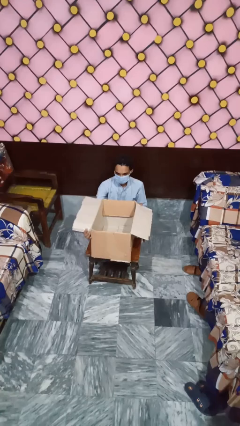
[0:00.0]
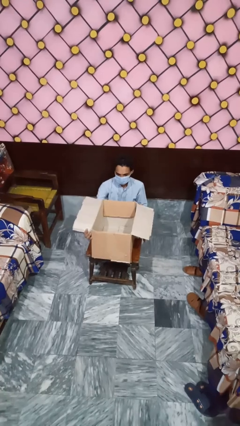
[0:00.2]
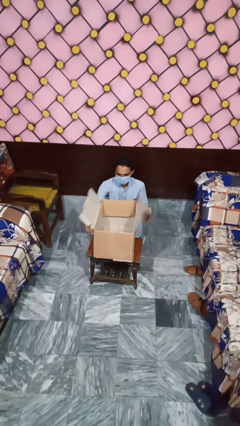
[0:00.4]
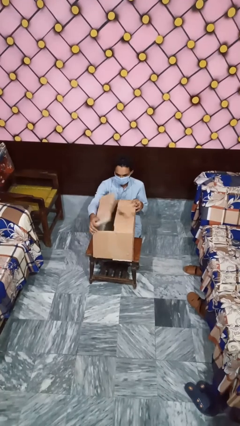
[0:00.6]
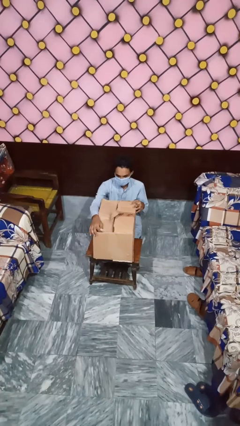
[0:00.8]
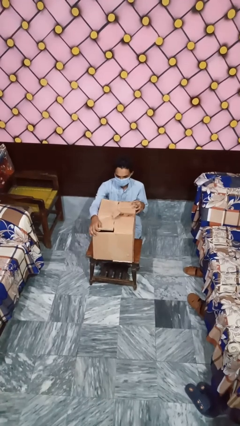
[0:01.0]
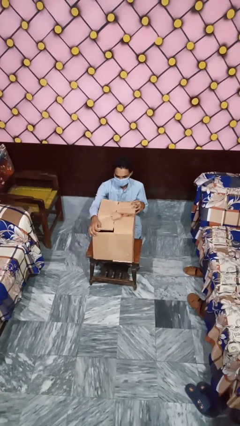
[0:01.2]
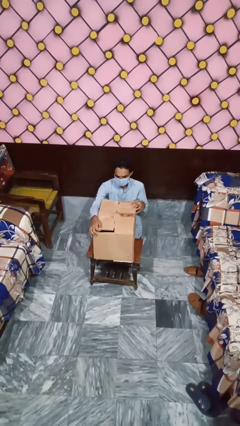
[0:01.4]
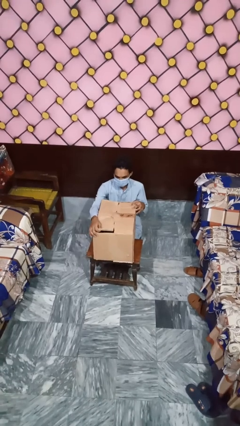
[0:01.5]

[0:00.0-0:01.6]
person closes box

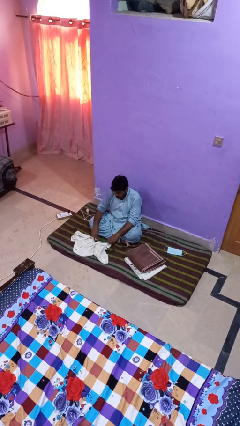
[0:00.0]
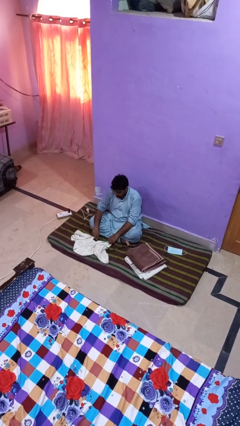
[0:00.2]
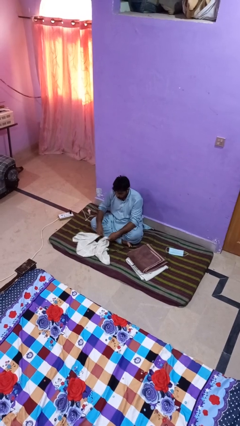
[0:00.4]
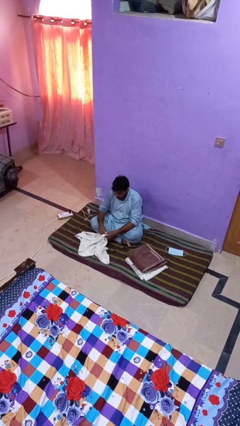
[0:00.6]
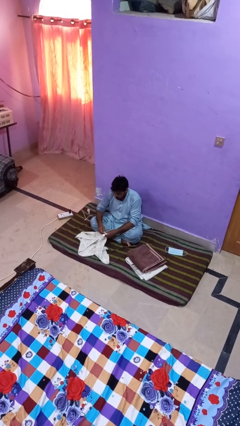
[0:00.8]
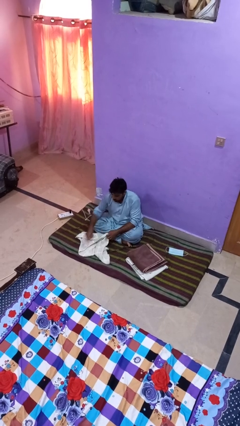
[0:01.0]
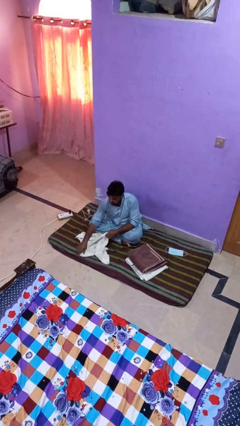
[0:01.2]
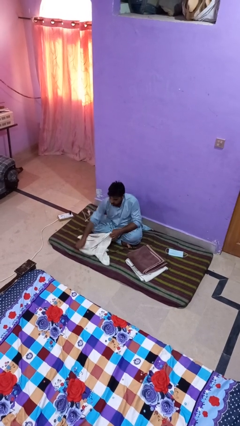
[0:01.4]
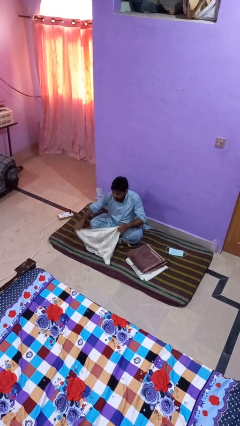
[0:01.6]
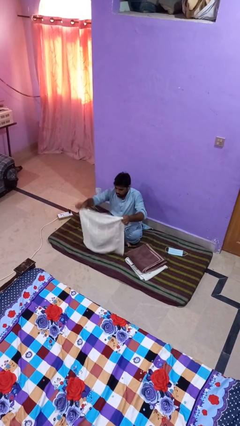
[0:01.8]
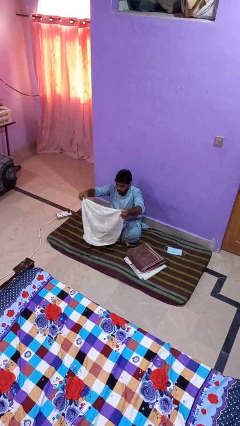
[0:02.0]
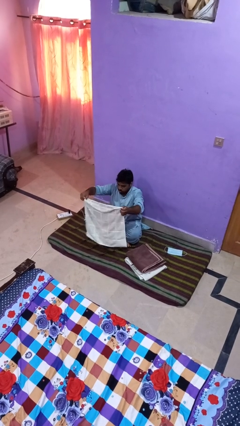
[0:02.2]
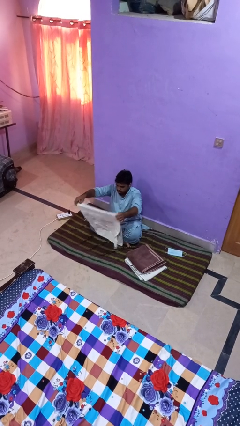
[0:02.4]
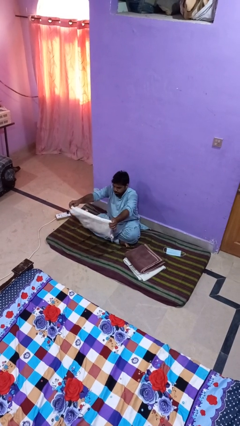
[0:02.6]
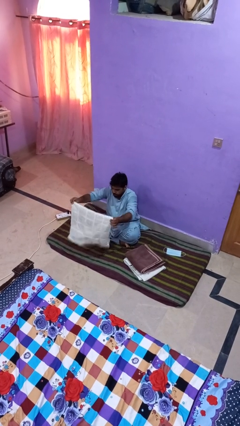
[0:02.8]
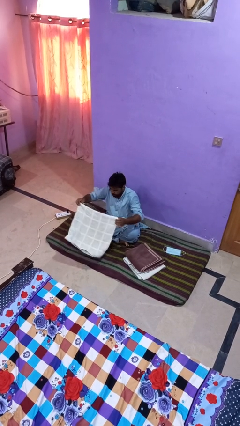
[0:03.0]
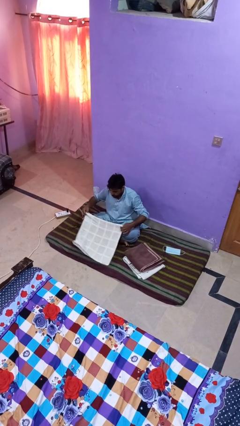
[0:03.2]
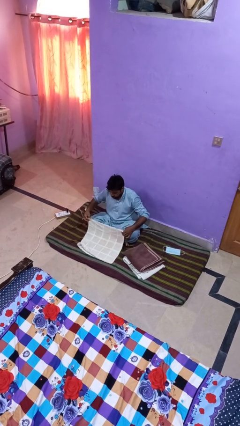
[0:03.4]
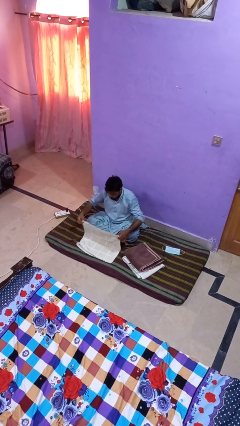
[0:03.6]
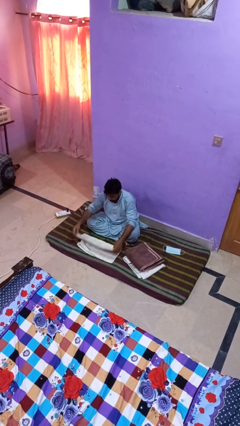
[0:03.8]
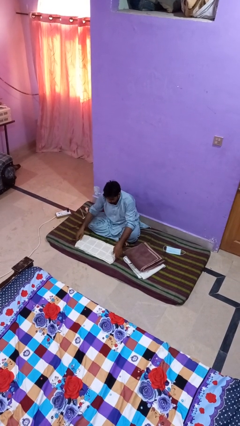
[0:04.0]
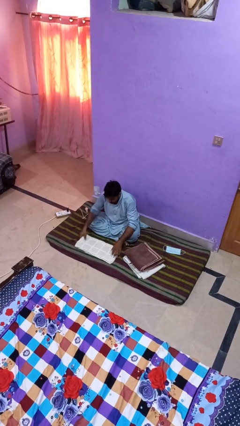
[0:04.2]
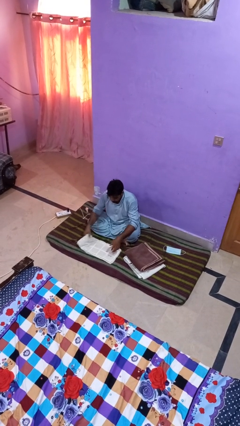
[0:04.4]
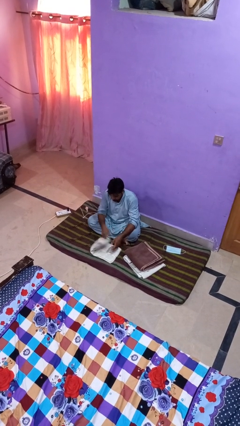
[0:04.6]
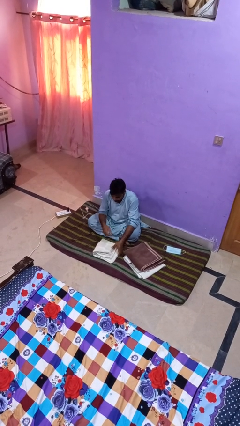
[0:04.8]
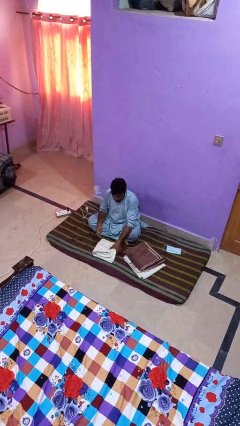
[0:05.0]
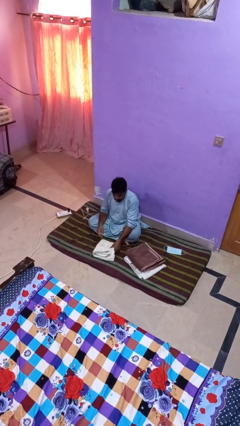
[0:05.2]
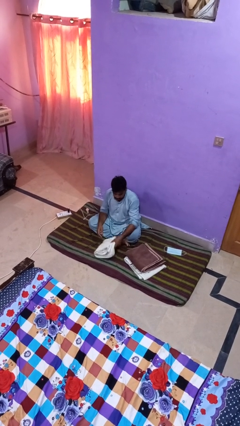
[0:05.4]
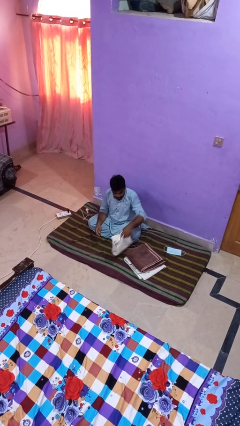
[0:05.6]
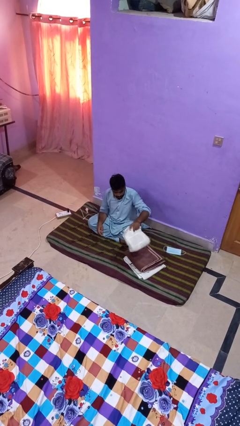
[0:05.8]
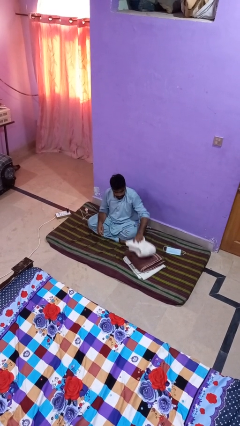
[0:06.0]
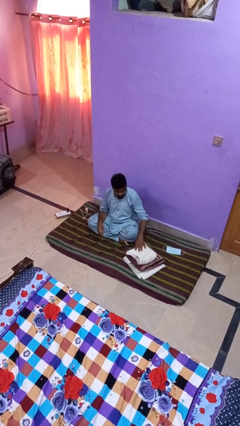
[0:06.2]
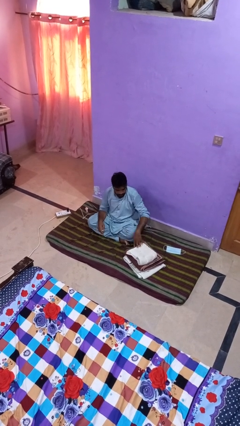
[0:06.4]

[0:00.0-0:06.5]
person folds towel

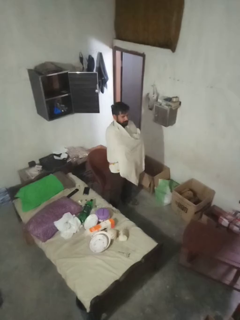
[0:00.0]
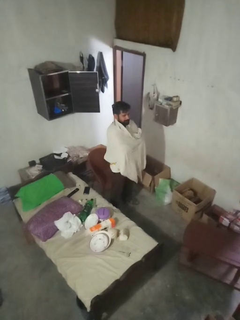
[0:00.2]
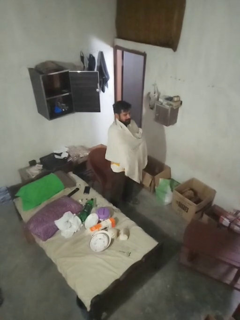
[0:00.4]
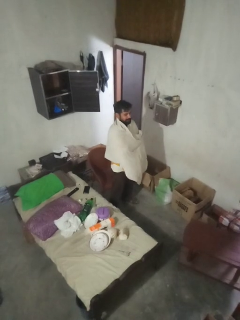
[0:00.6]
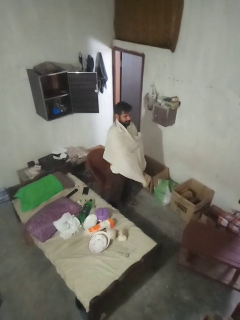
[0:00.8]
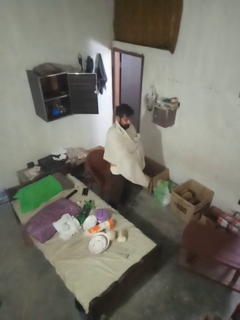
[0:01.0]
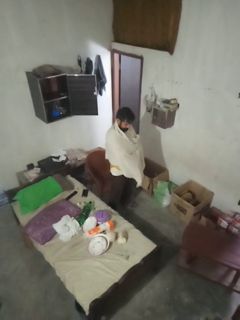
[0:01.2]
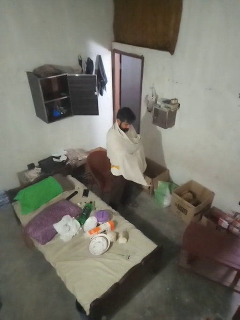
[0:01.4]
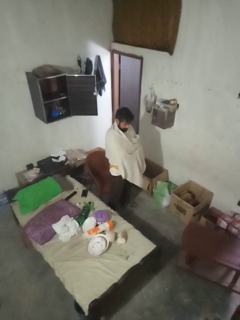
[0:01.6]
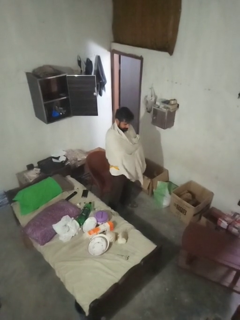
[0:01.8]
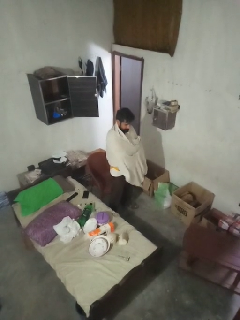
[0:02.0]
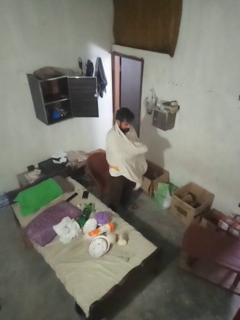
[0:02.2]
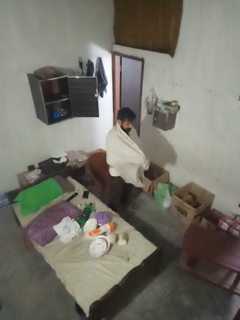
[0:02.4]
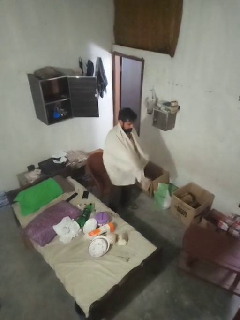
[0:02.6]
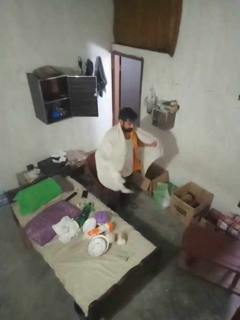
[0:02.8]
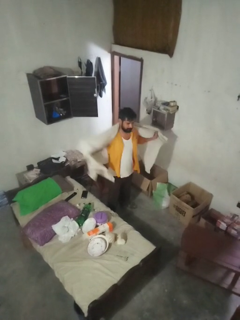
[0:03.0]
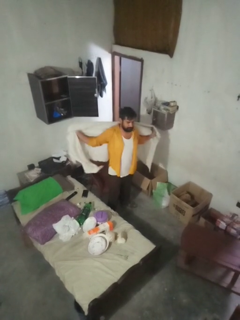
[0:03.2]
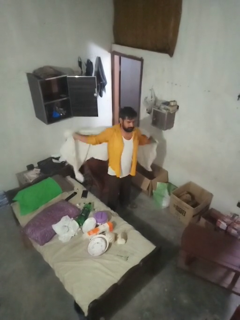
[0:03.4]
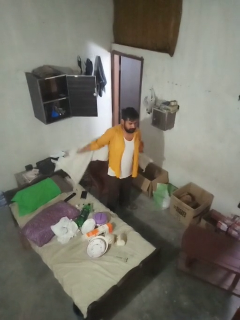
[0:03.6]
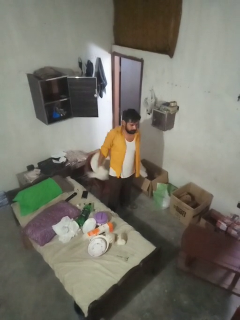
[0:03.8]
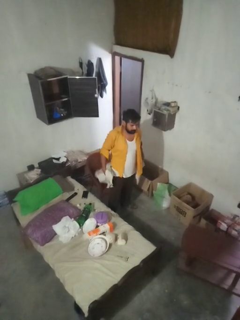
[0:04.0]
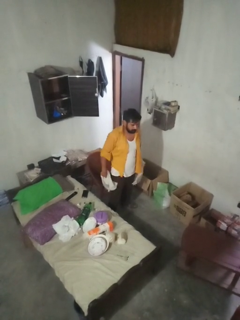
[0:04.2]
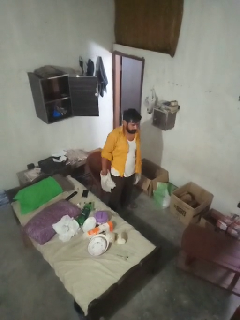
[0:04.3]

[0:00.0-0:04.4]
person uncovers with blanket

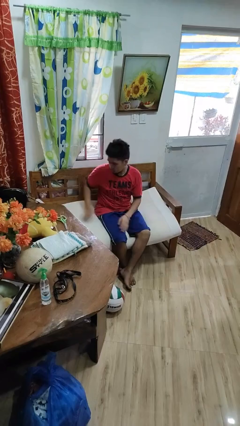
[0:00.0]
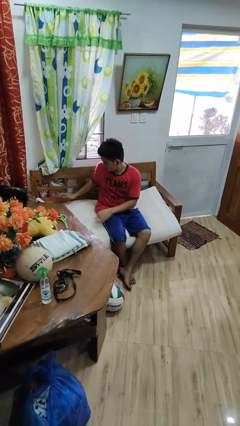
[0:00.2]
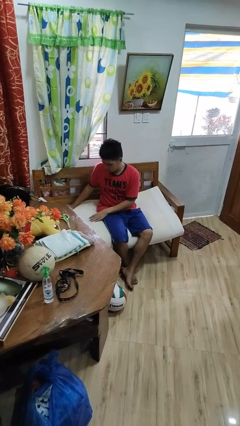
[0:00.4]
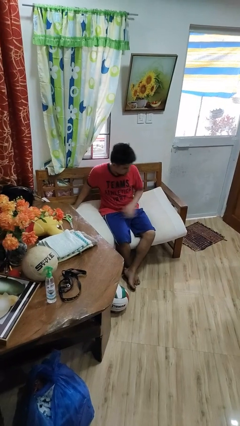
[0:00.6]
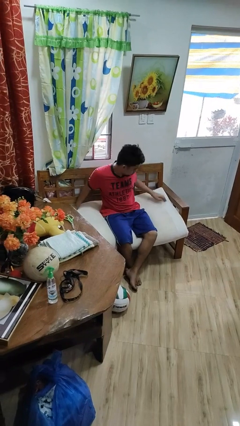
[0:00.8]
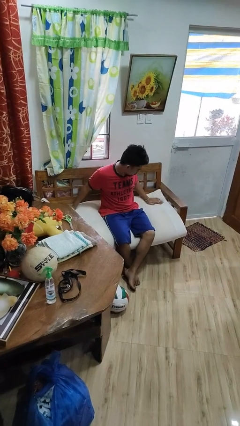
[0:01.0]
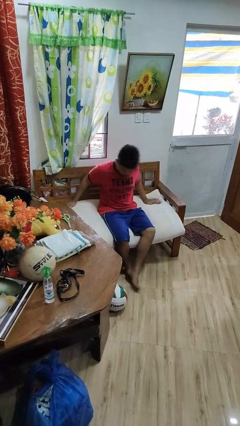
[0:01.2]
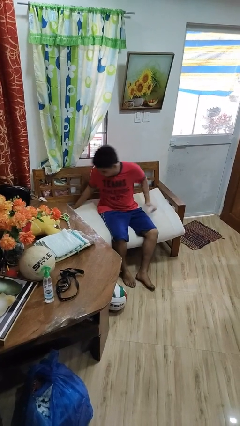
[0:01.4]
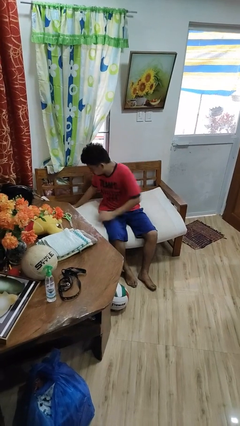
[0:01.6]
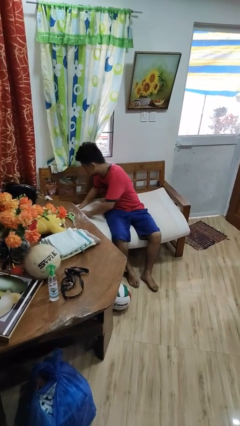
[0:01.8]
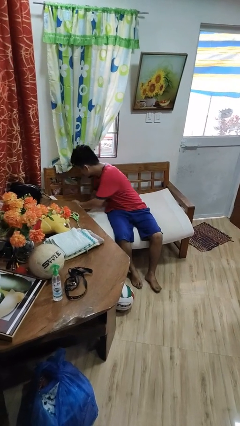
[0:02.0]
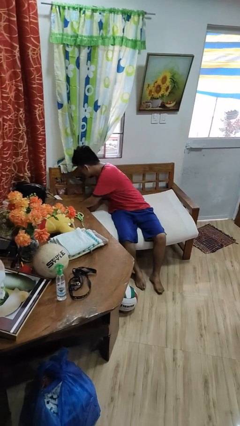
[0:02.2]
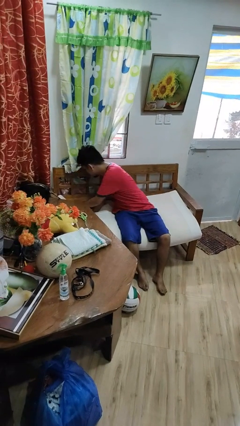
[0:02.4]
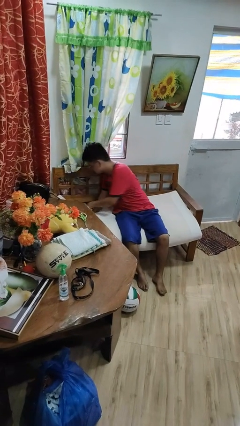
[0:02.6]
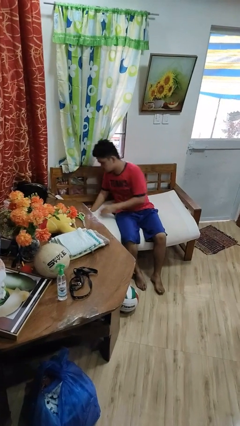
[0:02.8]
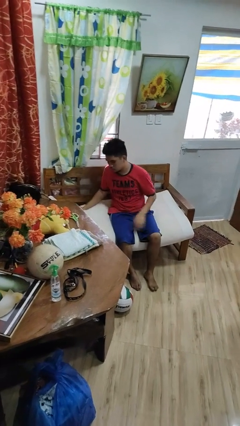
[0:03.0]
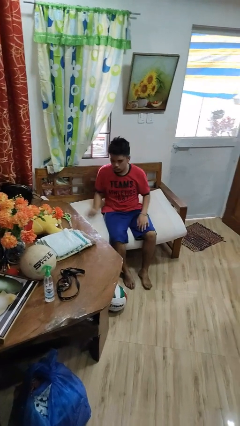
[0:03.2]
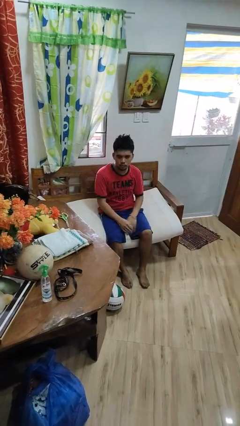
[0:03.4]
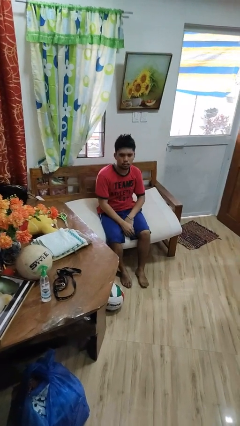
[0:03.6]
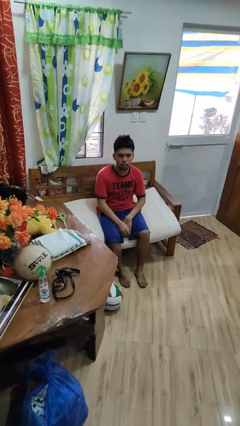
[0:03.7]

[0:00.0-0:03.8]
person searches in couch

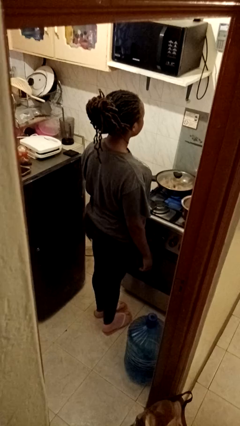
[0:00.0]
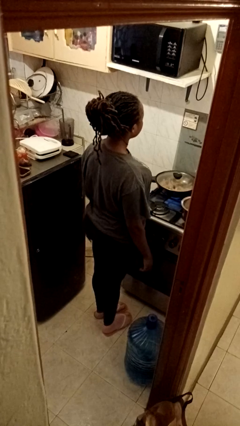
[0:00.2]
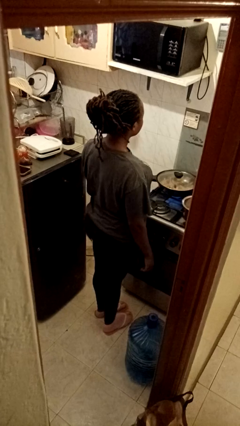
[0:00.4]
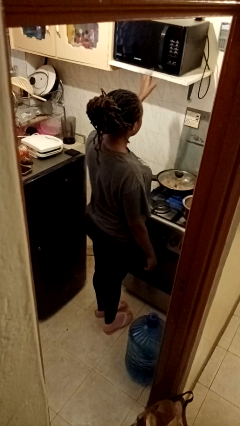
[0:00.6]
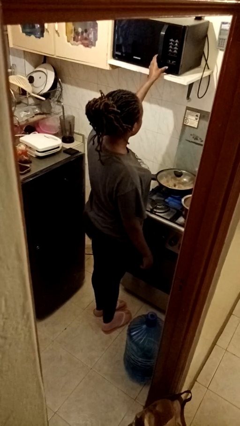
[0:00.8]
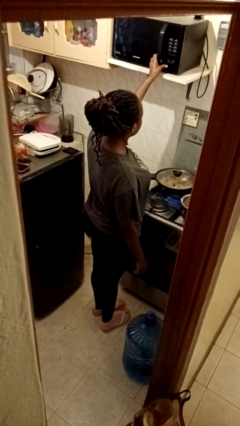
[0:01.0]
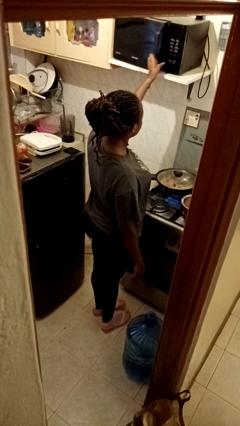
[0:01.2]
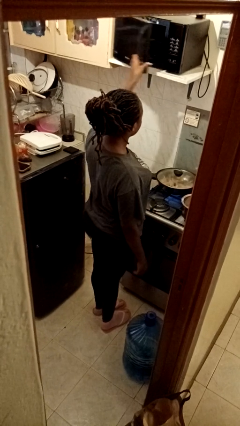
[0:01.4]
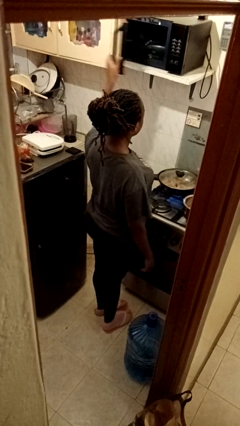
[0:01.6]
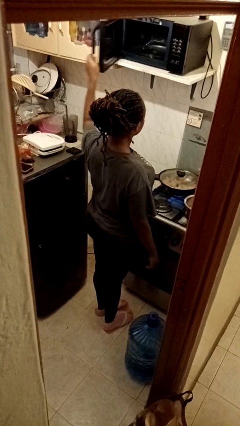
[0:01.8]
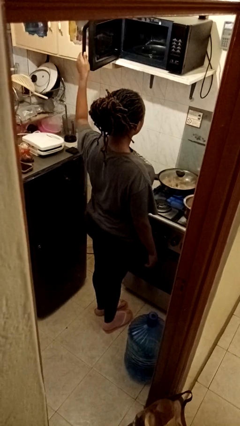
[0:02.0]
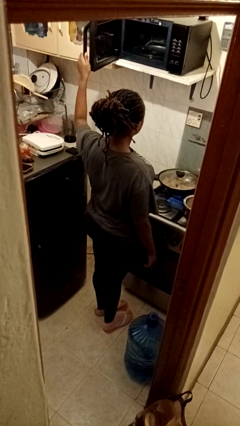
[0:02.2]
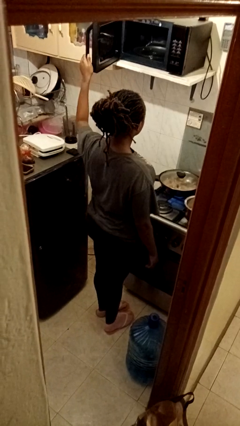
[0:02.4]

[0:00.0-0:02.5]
person opens microwave

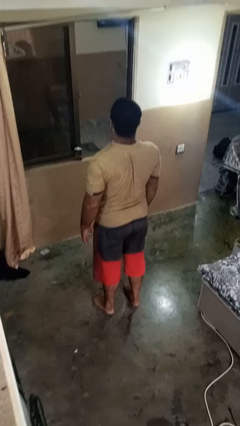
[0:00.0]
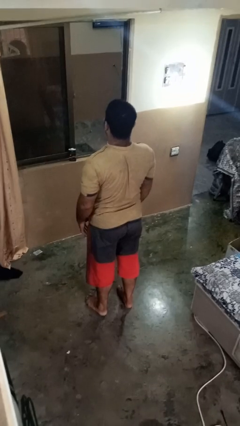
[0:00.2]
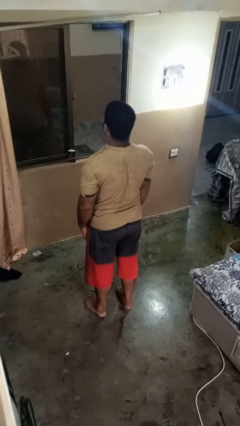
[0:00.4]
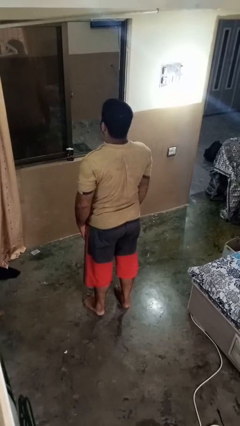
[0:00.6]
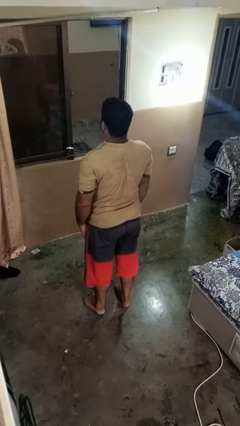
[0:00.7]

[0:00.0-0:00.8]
person stands up
